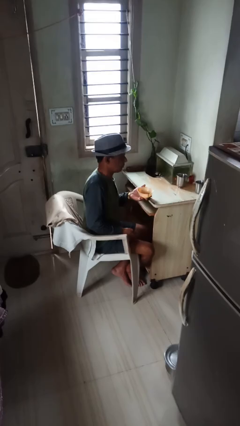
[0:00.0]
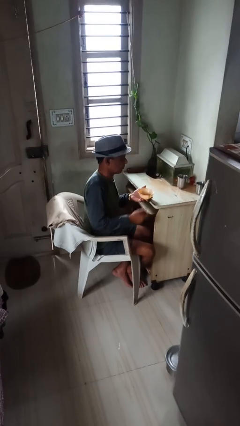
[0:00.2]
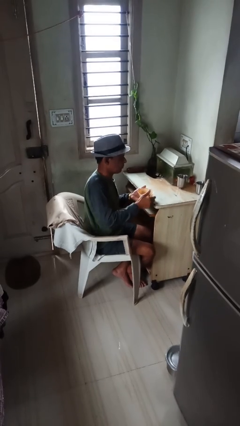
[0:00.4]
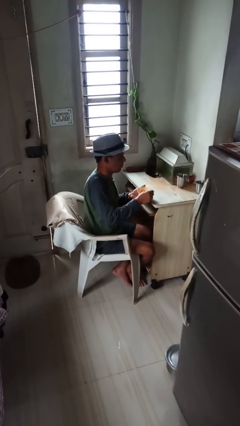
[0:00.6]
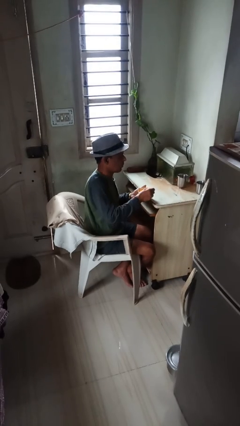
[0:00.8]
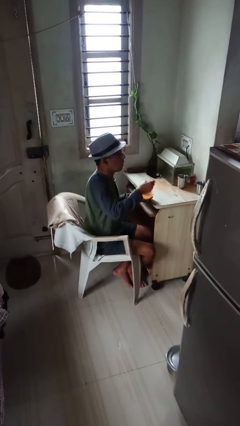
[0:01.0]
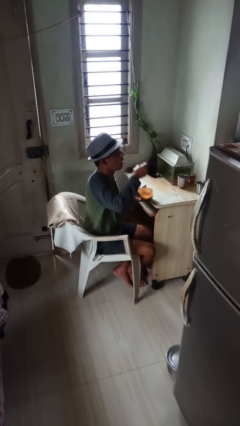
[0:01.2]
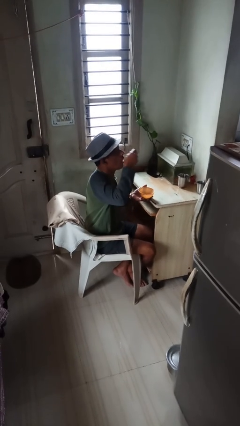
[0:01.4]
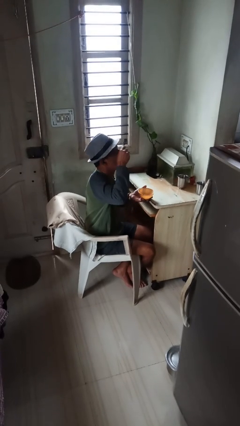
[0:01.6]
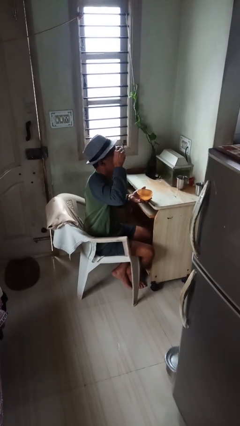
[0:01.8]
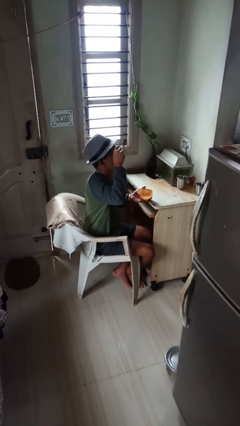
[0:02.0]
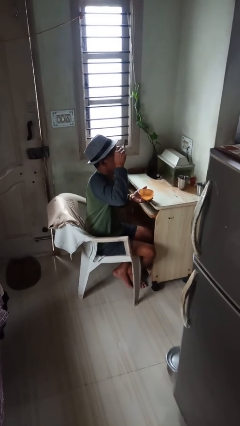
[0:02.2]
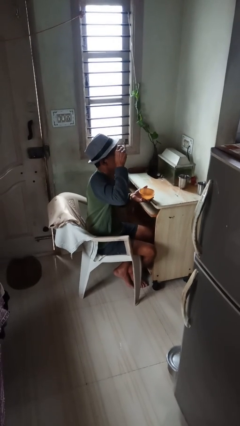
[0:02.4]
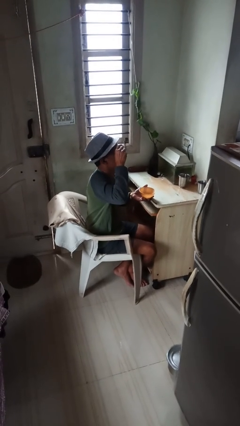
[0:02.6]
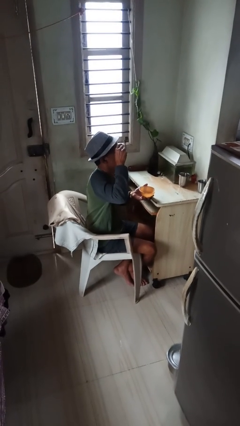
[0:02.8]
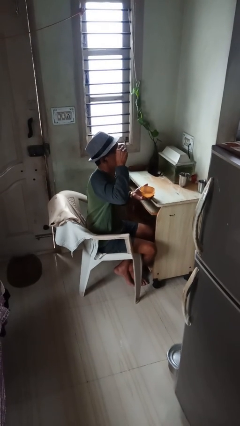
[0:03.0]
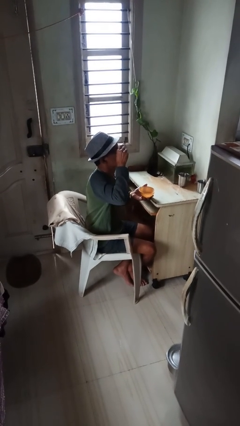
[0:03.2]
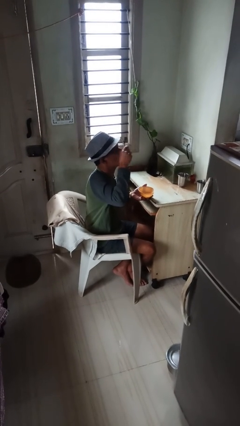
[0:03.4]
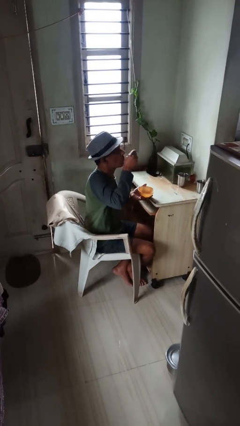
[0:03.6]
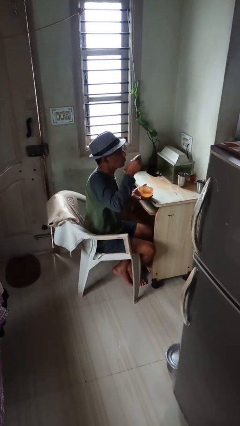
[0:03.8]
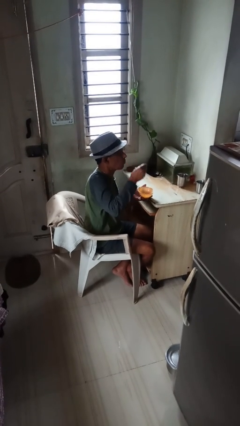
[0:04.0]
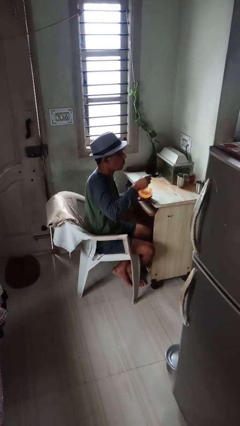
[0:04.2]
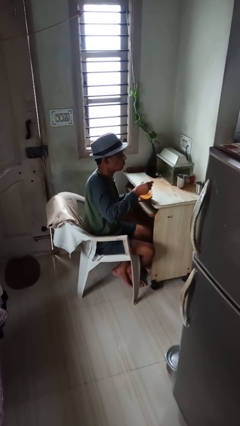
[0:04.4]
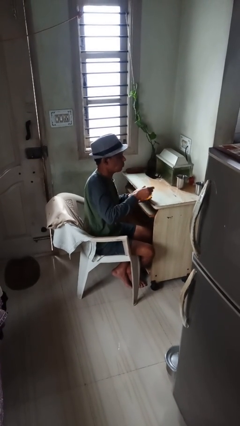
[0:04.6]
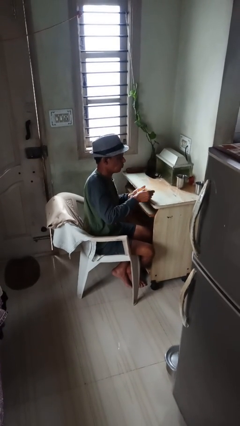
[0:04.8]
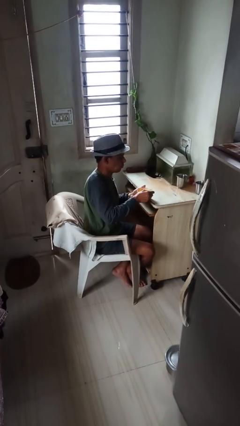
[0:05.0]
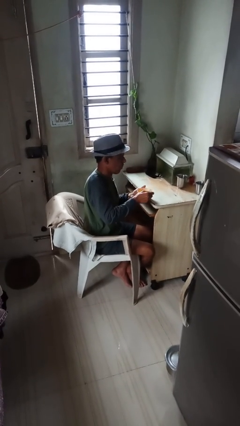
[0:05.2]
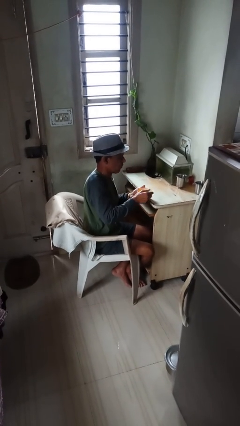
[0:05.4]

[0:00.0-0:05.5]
person eats with utensil

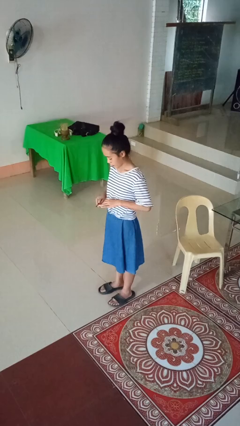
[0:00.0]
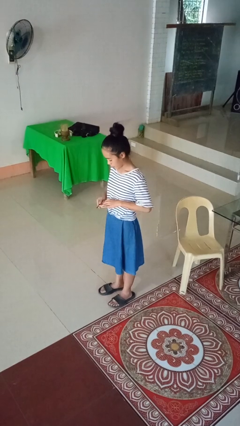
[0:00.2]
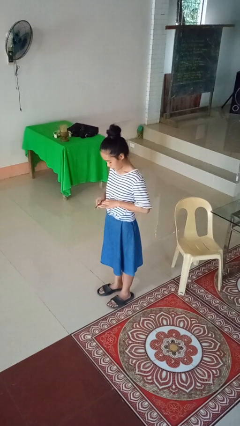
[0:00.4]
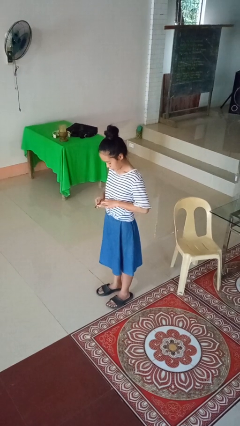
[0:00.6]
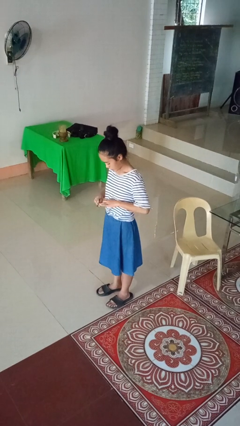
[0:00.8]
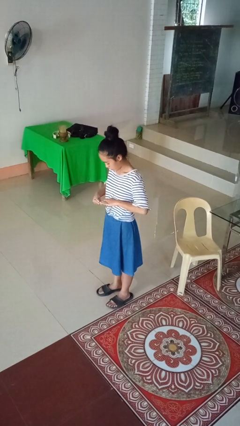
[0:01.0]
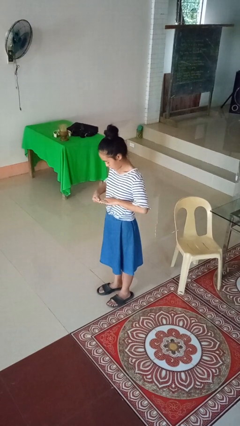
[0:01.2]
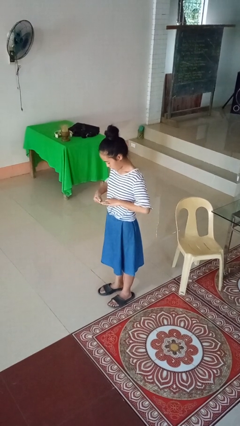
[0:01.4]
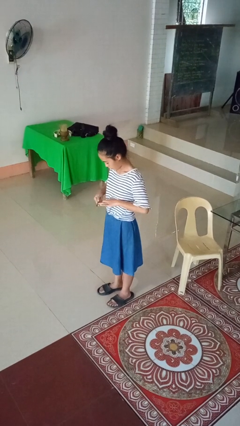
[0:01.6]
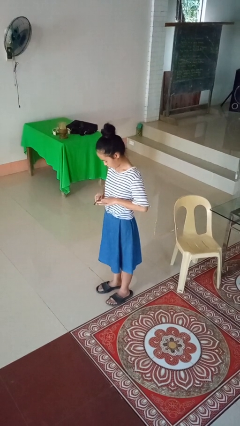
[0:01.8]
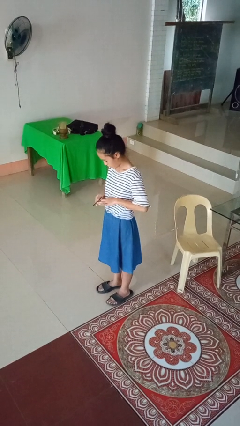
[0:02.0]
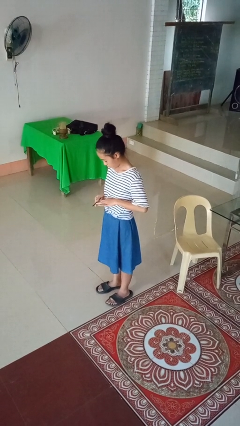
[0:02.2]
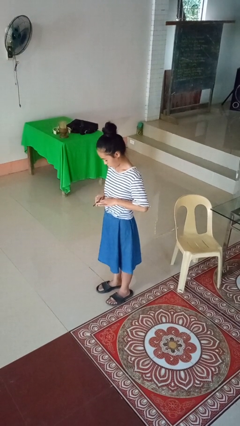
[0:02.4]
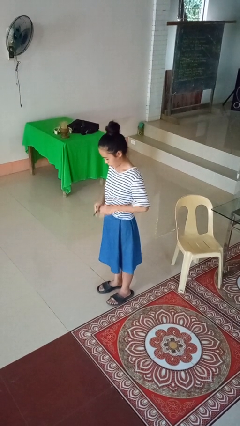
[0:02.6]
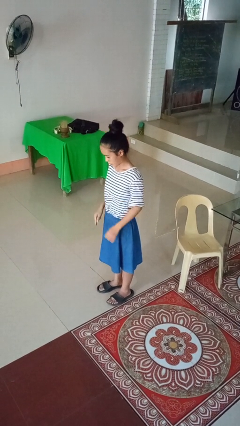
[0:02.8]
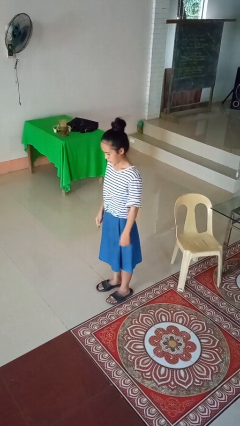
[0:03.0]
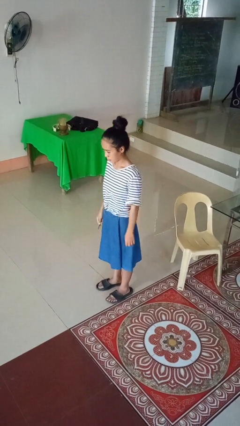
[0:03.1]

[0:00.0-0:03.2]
person files fingernails

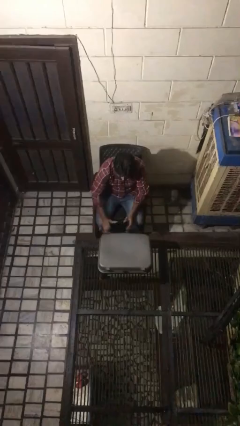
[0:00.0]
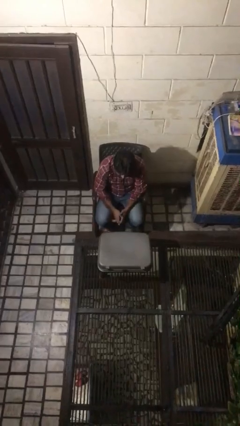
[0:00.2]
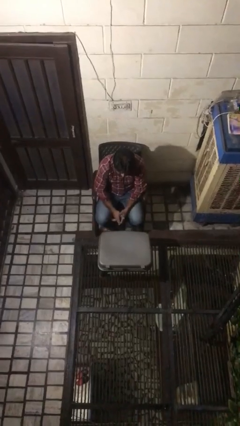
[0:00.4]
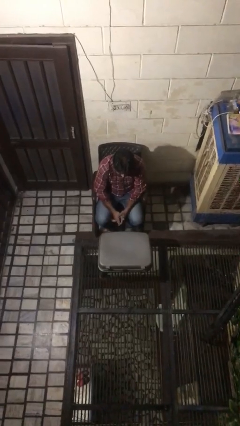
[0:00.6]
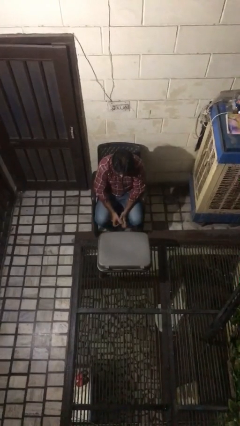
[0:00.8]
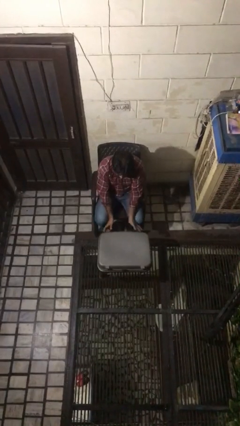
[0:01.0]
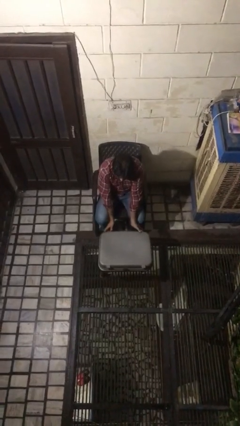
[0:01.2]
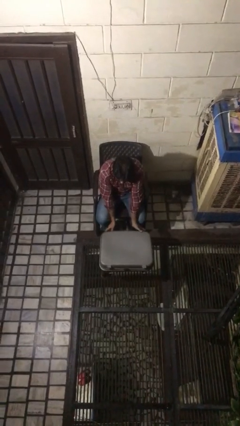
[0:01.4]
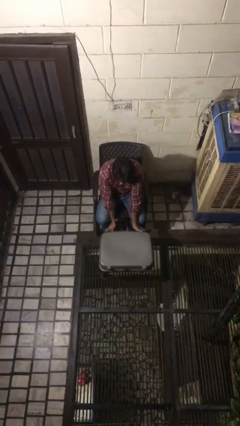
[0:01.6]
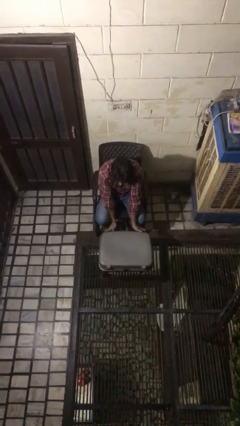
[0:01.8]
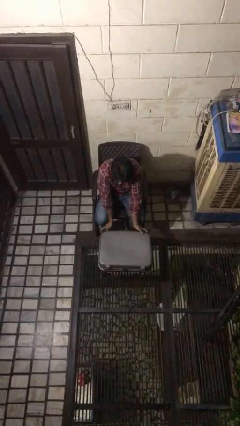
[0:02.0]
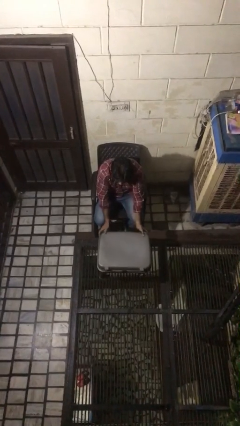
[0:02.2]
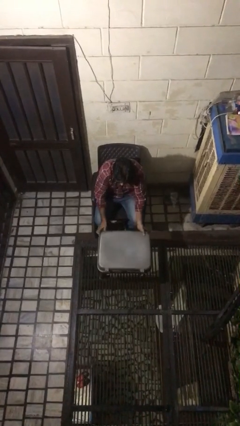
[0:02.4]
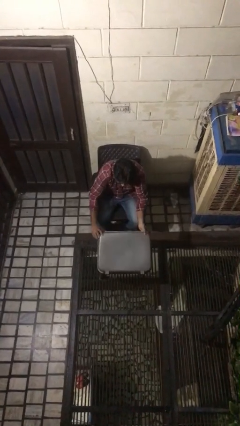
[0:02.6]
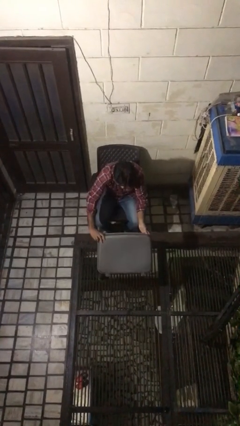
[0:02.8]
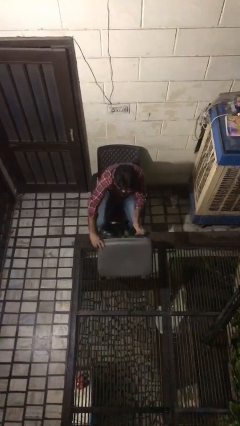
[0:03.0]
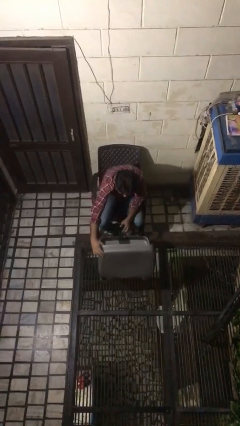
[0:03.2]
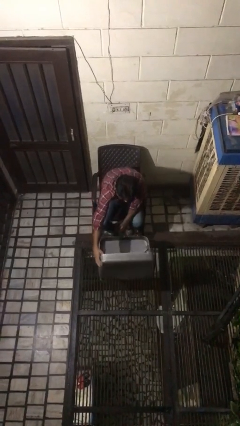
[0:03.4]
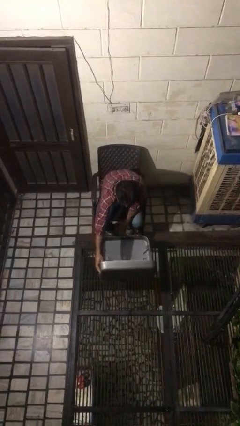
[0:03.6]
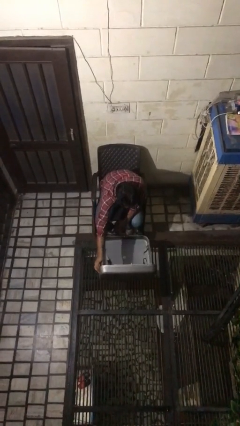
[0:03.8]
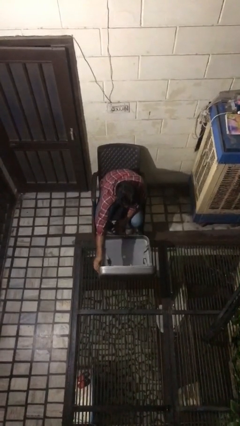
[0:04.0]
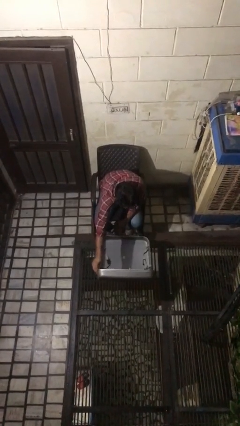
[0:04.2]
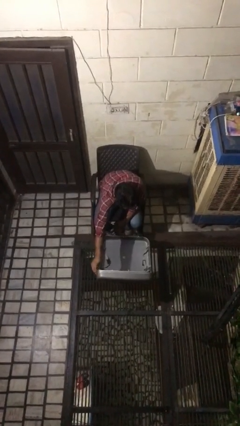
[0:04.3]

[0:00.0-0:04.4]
person opens suitcase

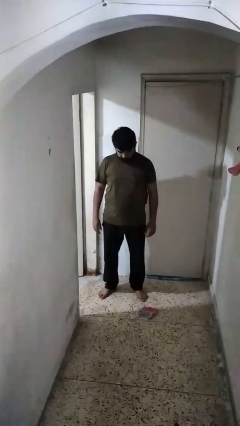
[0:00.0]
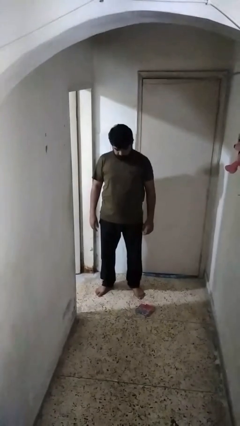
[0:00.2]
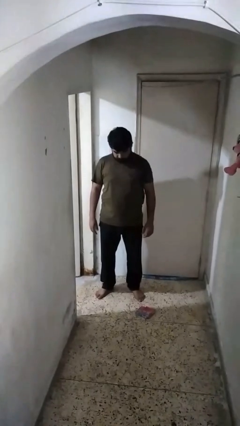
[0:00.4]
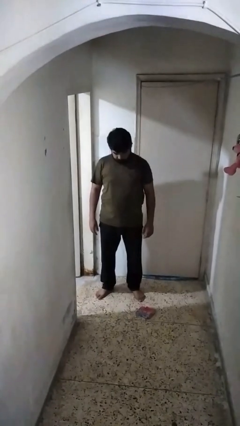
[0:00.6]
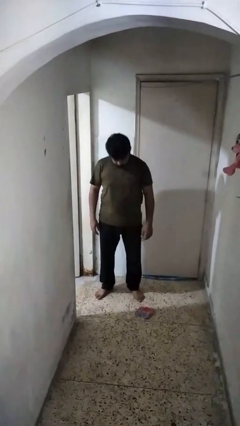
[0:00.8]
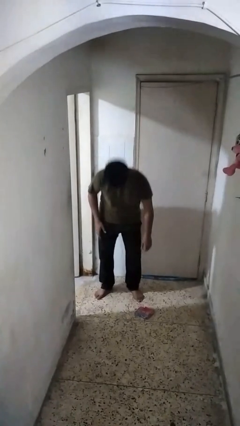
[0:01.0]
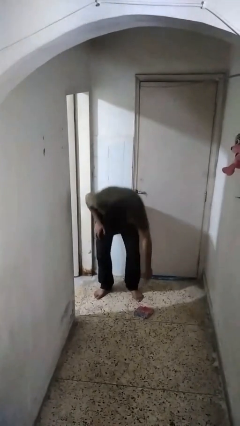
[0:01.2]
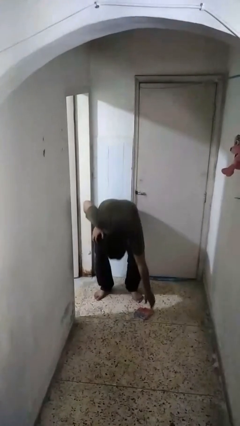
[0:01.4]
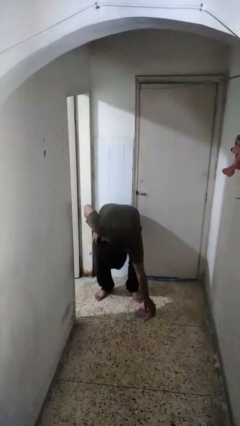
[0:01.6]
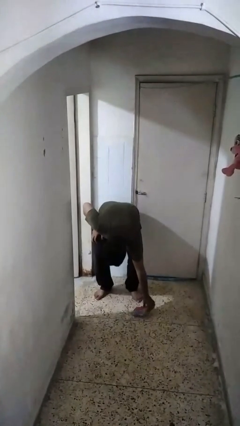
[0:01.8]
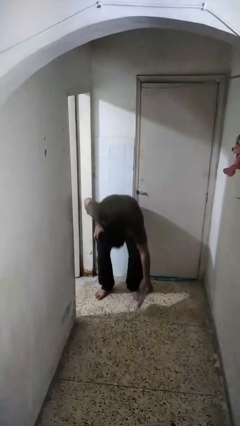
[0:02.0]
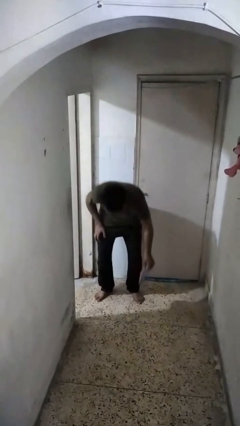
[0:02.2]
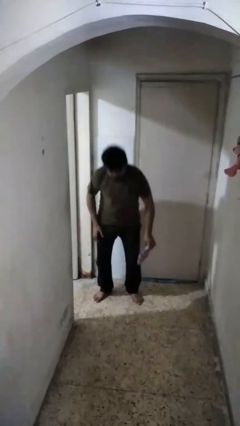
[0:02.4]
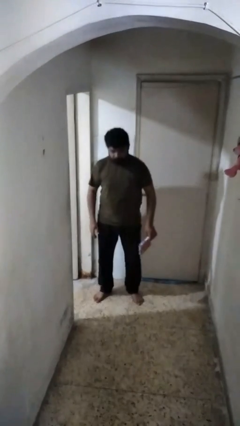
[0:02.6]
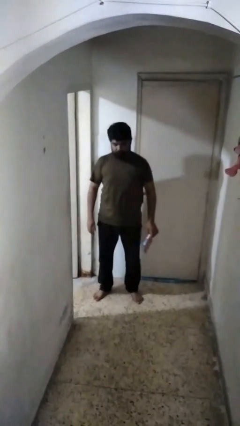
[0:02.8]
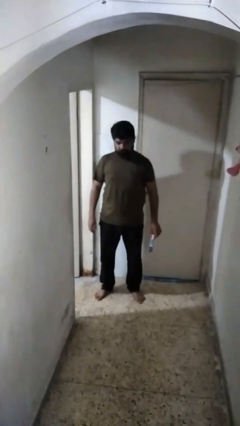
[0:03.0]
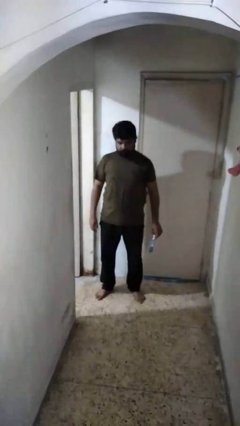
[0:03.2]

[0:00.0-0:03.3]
person picks up object from floor

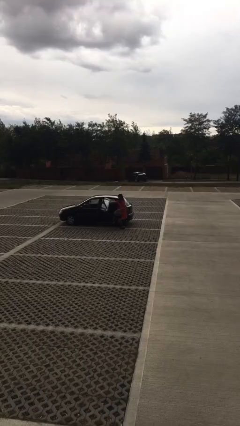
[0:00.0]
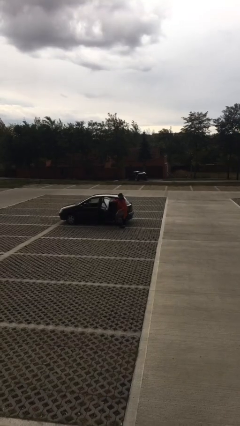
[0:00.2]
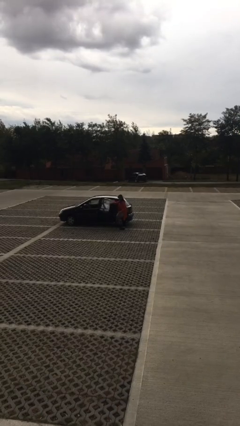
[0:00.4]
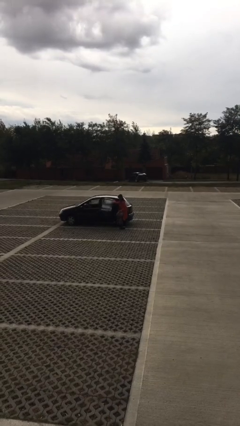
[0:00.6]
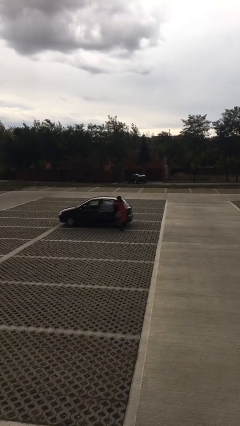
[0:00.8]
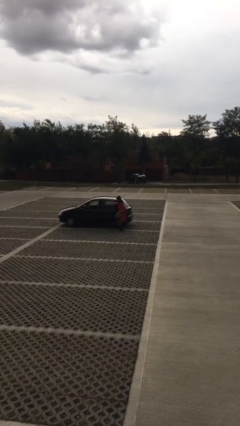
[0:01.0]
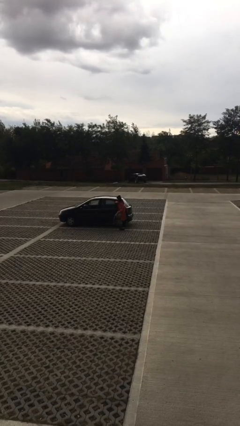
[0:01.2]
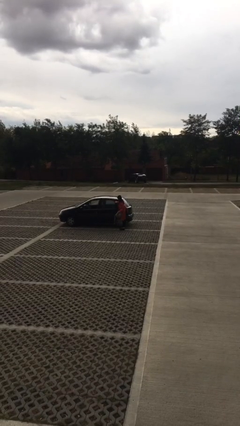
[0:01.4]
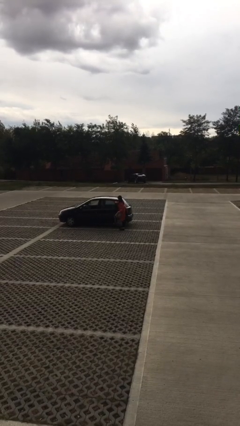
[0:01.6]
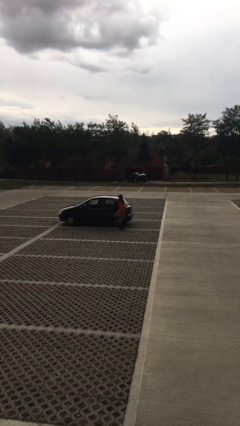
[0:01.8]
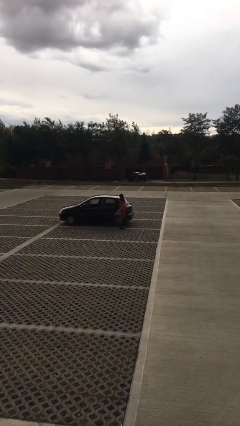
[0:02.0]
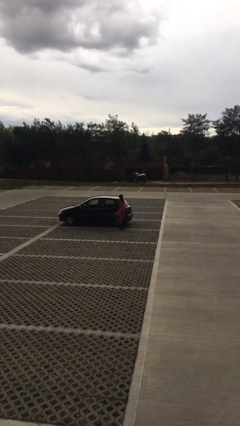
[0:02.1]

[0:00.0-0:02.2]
person closes car door
